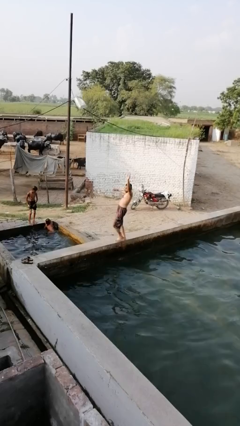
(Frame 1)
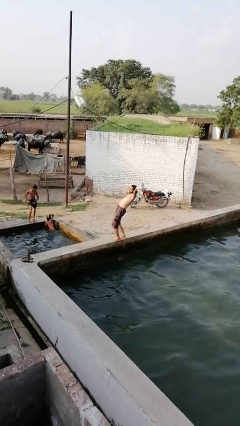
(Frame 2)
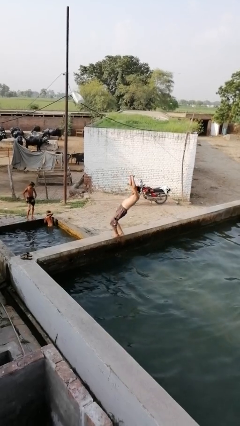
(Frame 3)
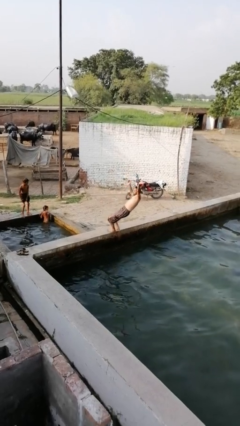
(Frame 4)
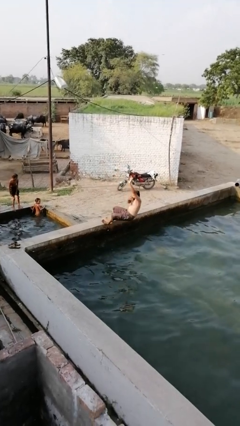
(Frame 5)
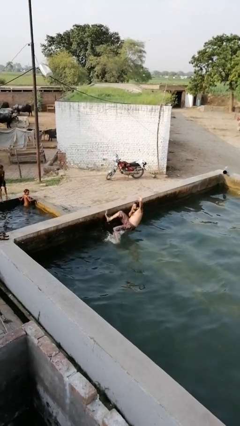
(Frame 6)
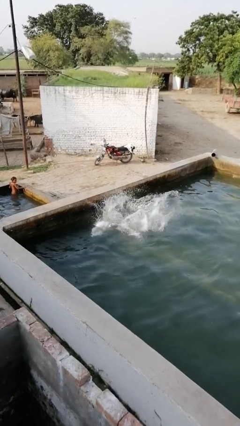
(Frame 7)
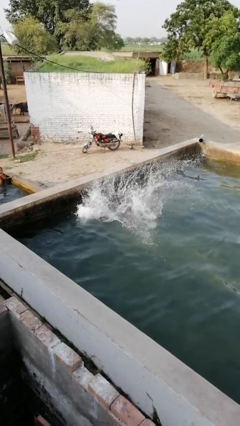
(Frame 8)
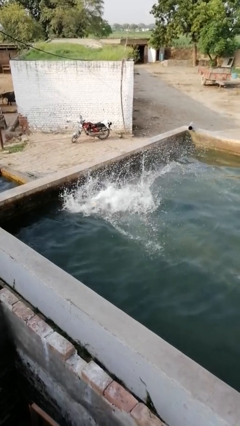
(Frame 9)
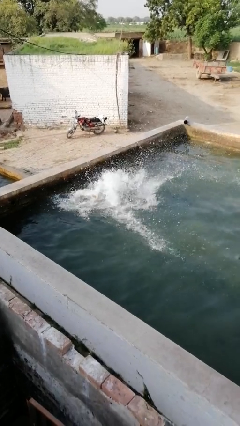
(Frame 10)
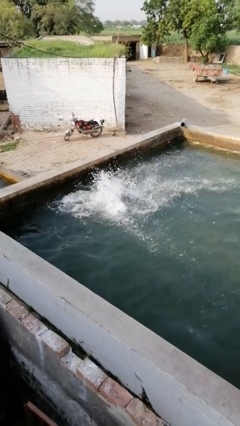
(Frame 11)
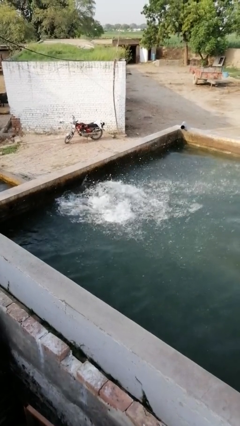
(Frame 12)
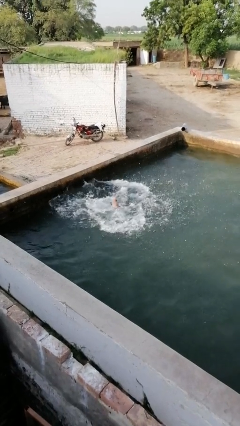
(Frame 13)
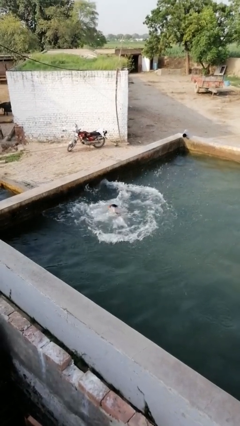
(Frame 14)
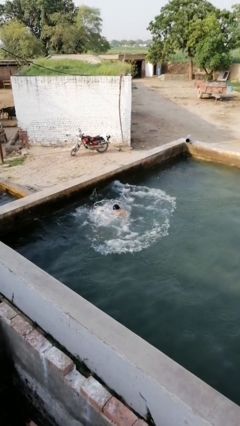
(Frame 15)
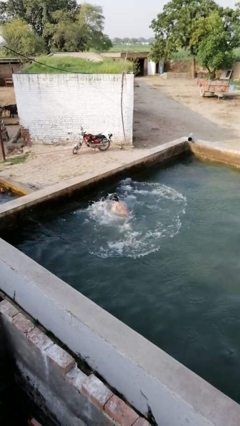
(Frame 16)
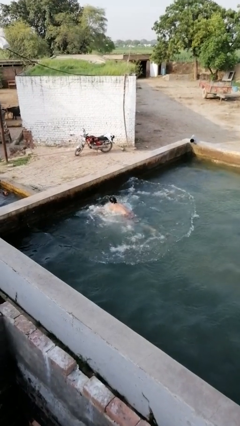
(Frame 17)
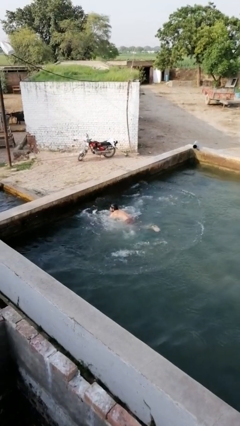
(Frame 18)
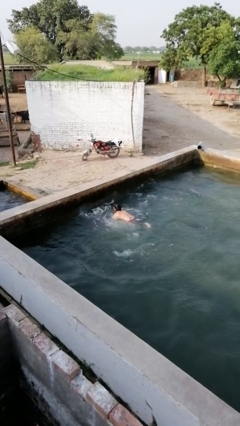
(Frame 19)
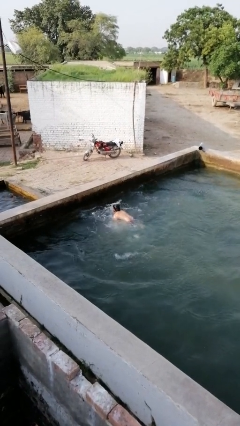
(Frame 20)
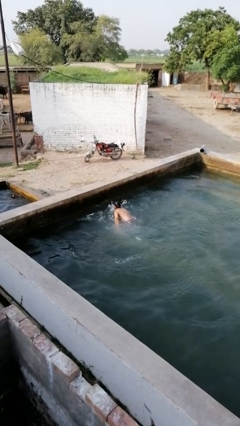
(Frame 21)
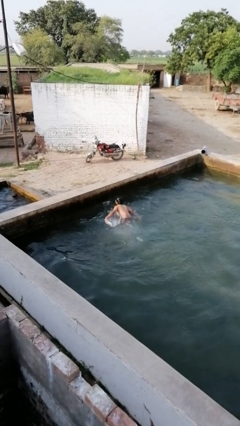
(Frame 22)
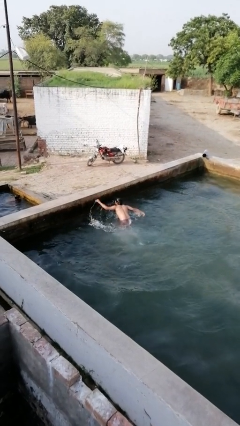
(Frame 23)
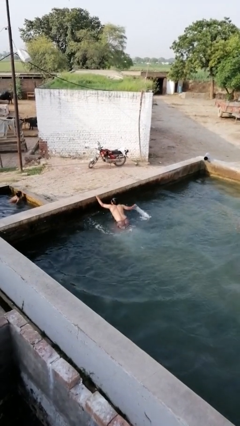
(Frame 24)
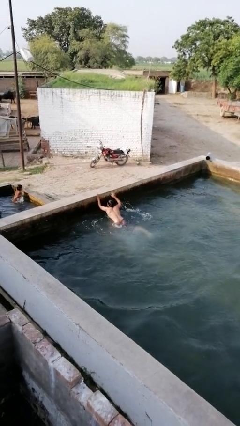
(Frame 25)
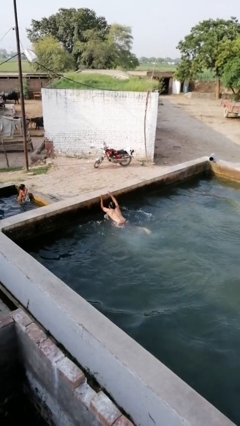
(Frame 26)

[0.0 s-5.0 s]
person falls into pool

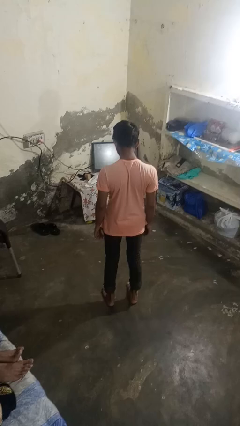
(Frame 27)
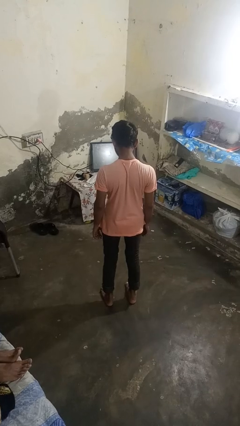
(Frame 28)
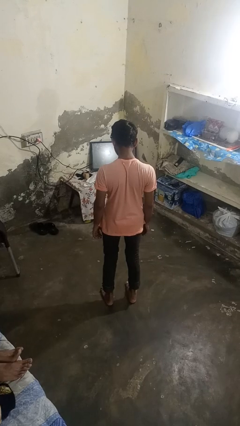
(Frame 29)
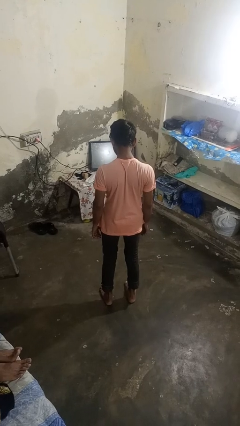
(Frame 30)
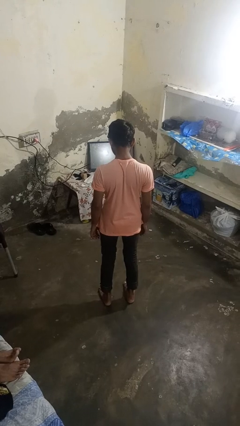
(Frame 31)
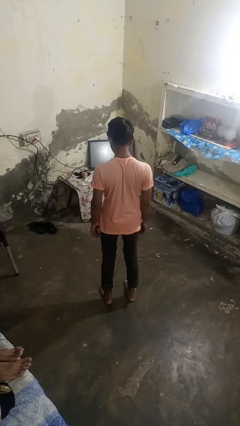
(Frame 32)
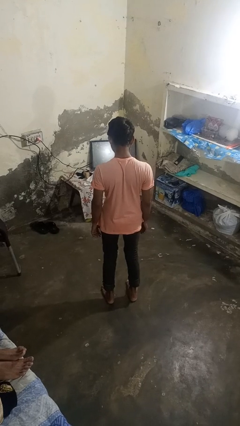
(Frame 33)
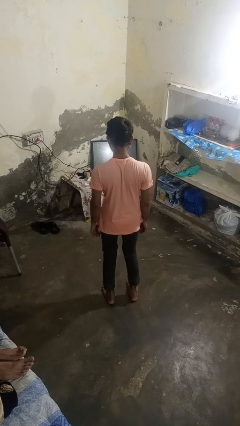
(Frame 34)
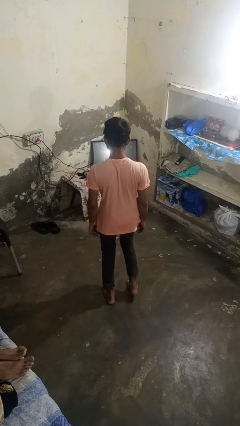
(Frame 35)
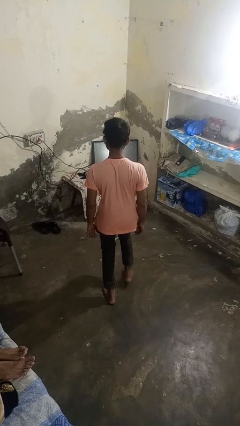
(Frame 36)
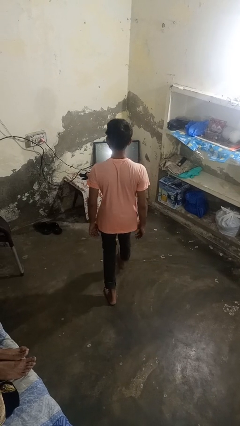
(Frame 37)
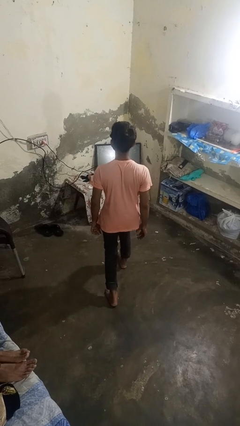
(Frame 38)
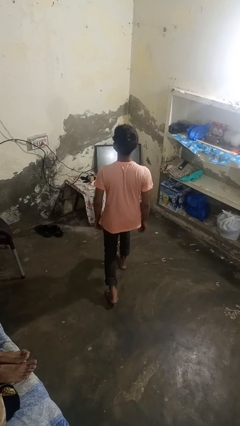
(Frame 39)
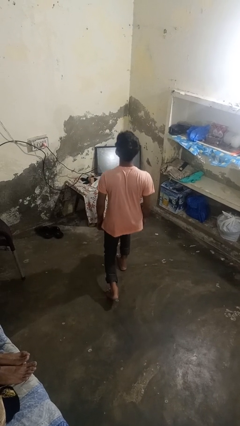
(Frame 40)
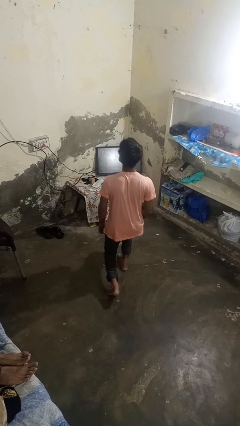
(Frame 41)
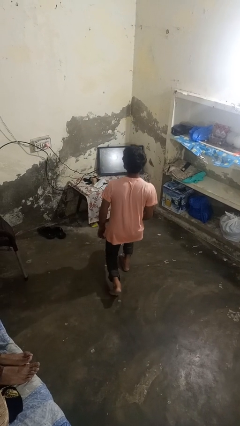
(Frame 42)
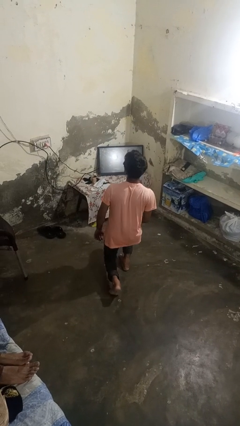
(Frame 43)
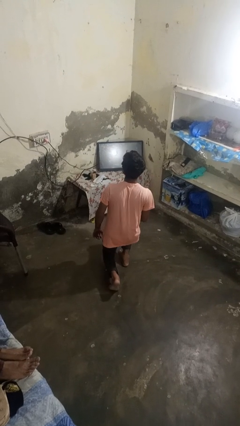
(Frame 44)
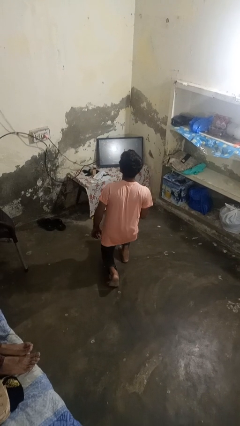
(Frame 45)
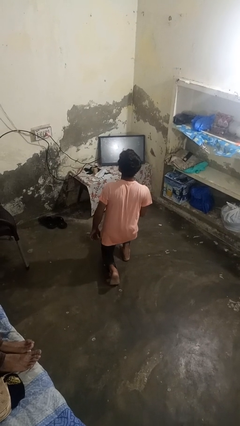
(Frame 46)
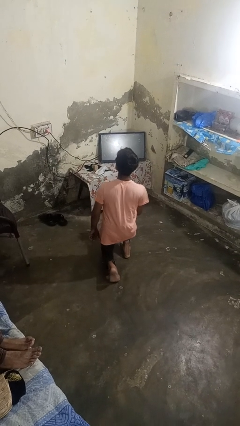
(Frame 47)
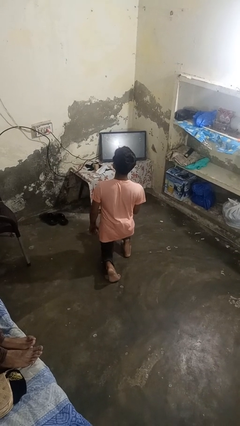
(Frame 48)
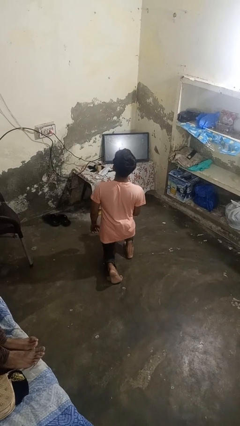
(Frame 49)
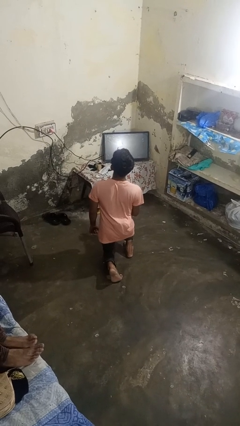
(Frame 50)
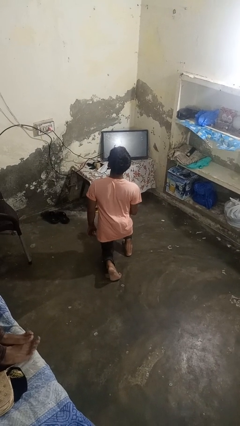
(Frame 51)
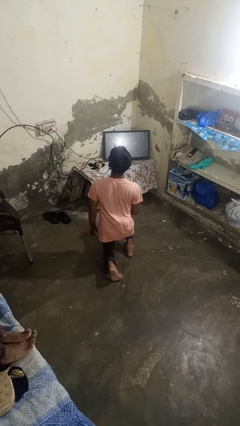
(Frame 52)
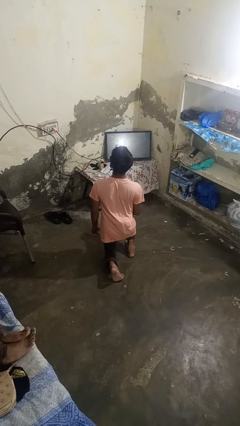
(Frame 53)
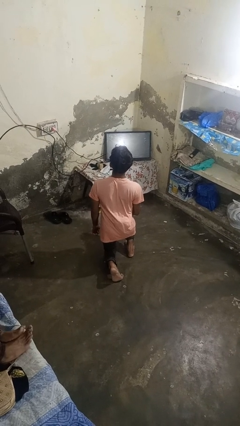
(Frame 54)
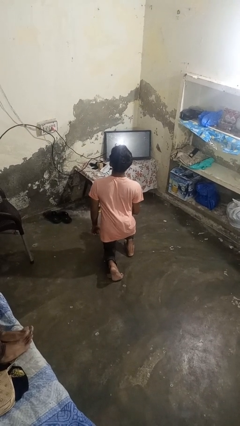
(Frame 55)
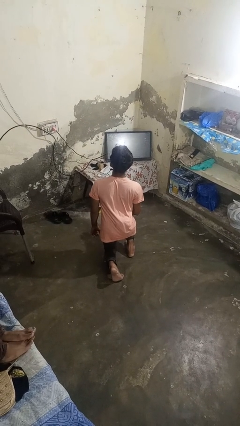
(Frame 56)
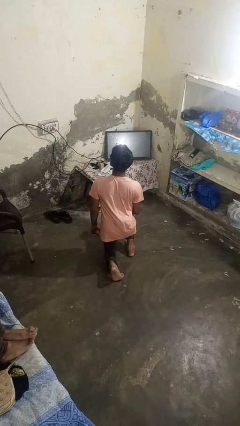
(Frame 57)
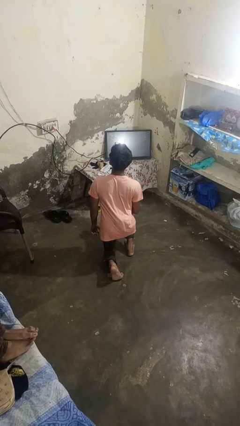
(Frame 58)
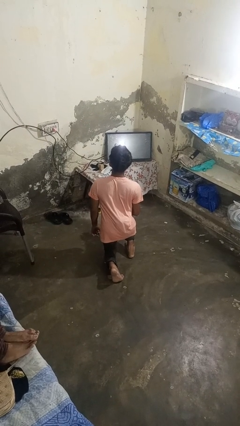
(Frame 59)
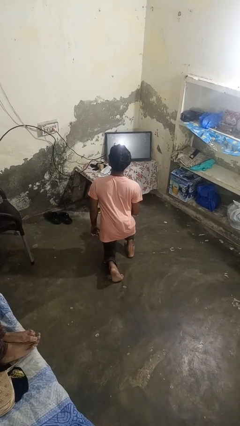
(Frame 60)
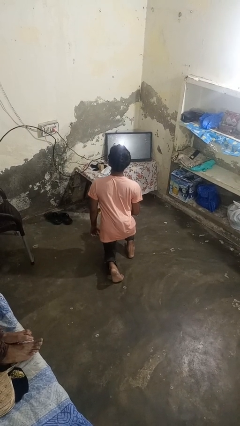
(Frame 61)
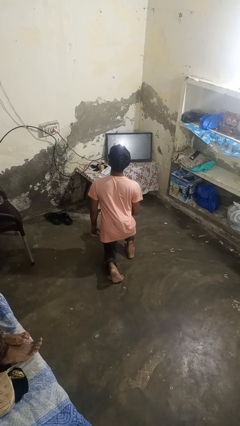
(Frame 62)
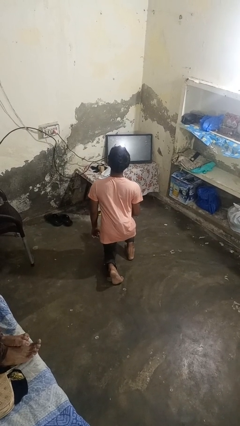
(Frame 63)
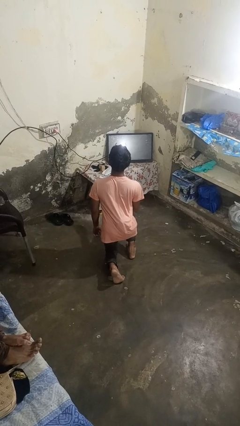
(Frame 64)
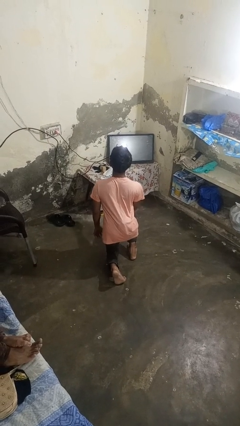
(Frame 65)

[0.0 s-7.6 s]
person kneels

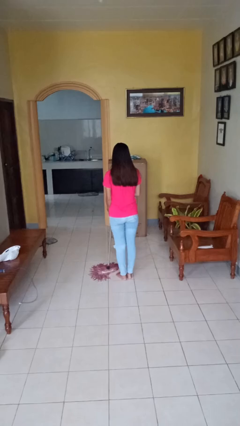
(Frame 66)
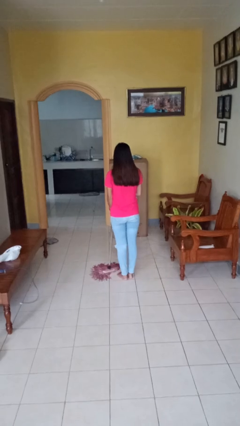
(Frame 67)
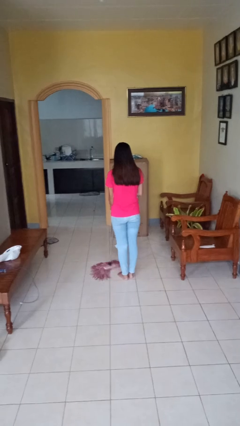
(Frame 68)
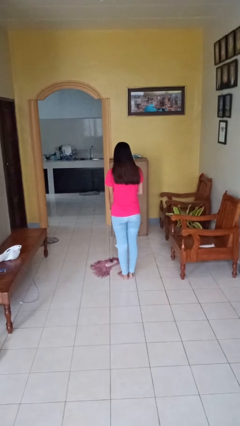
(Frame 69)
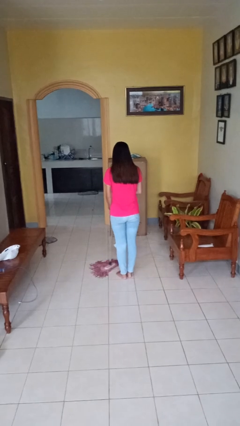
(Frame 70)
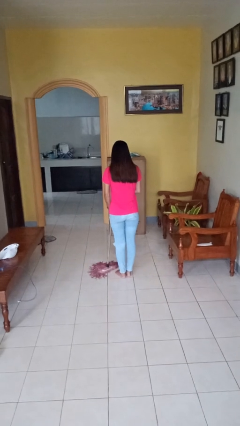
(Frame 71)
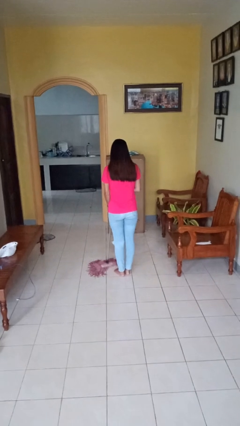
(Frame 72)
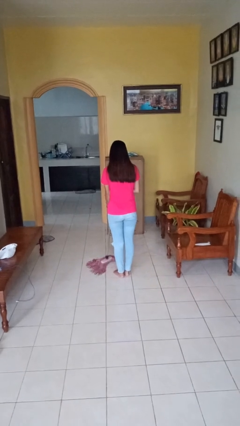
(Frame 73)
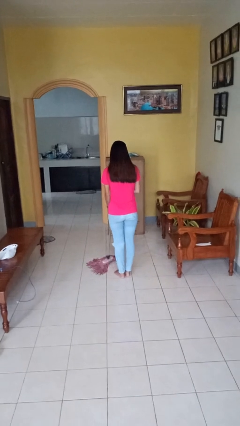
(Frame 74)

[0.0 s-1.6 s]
person mops

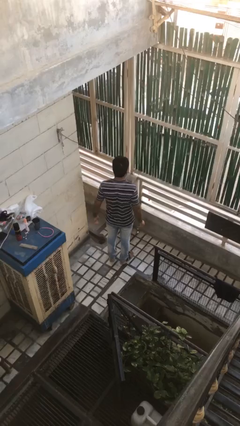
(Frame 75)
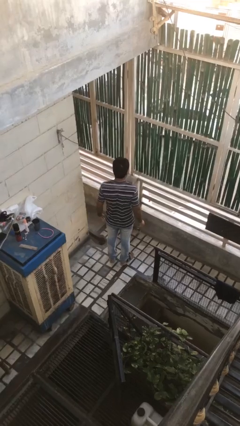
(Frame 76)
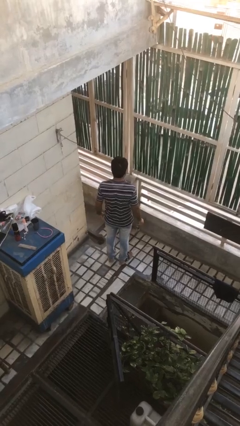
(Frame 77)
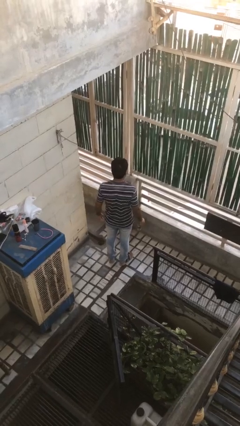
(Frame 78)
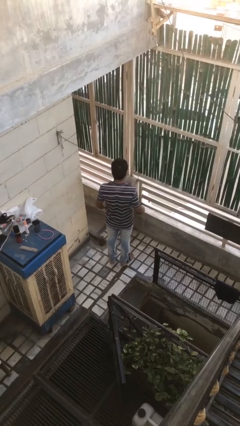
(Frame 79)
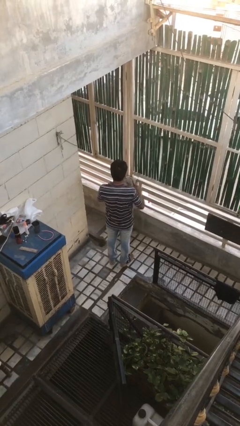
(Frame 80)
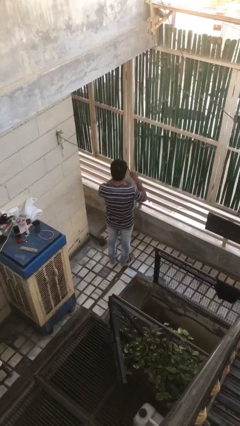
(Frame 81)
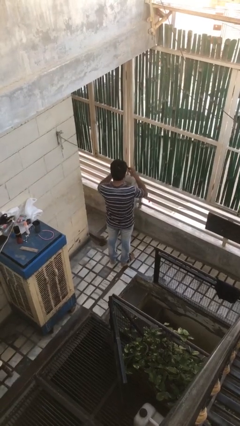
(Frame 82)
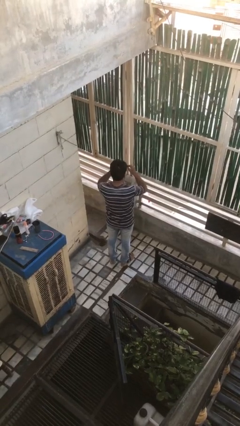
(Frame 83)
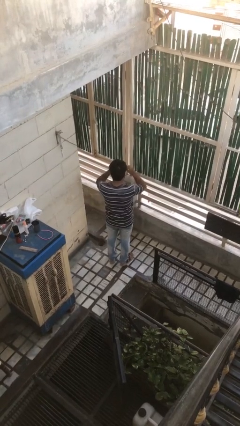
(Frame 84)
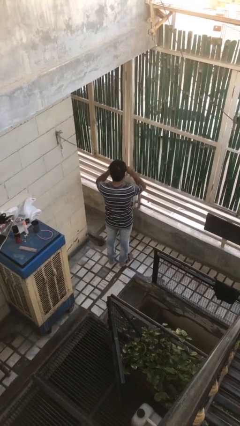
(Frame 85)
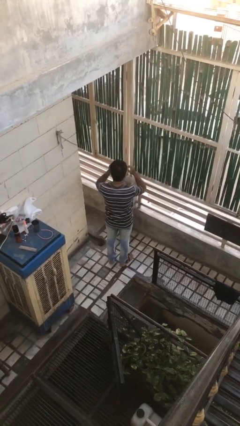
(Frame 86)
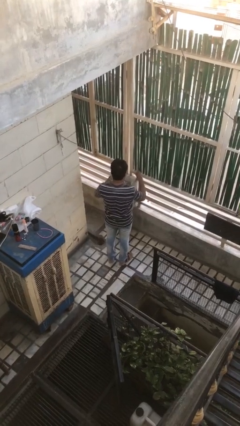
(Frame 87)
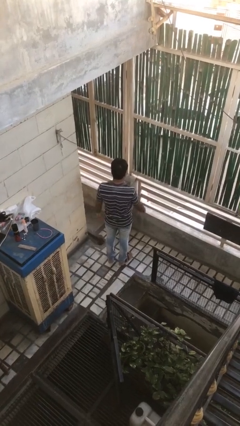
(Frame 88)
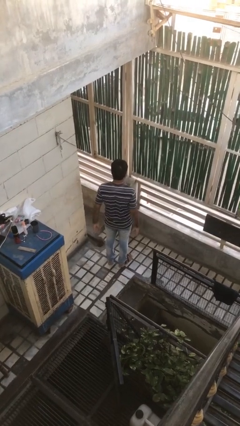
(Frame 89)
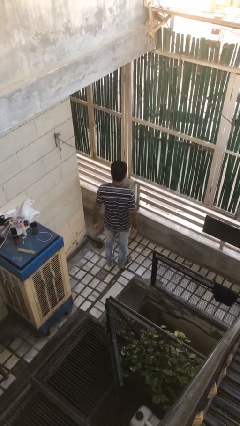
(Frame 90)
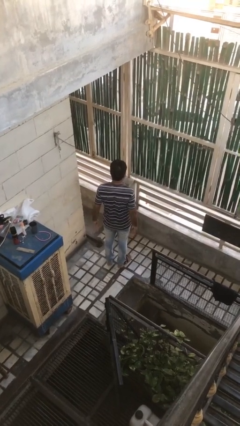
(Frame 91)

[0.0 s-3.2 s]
person puts on sunglasses
